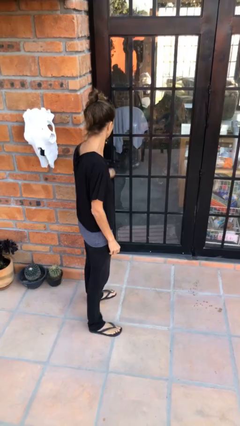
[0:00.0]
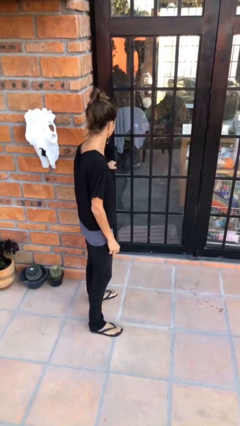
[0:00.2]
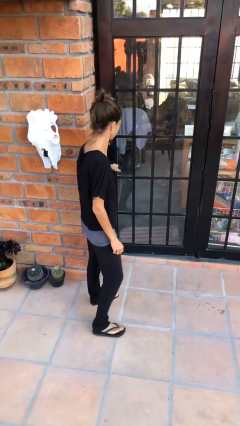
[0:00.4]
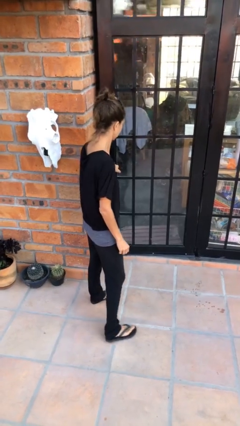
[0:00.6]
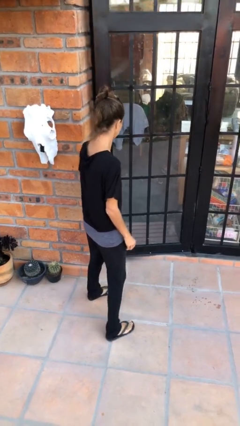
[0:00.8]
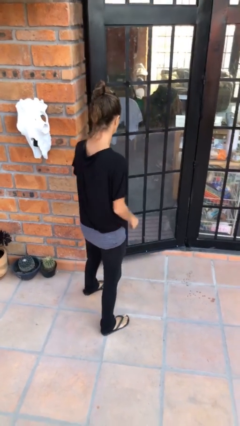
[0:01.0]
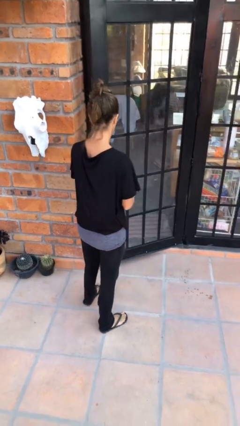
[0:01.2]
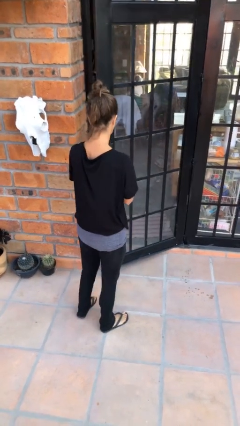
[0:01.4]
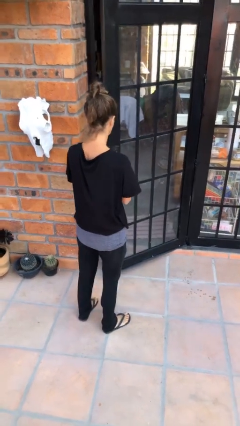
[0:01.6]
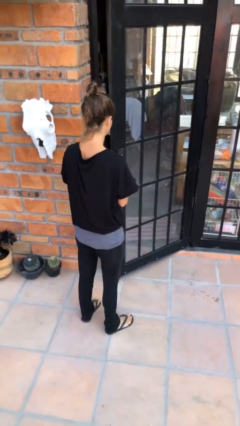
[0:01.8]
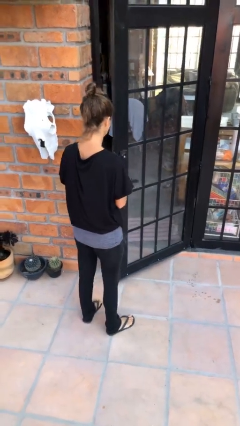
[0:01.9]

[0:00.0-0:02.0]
person opens facility door

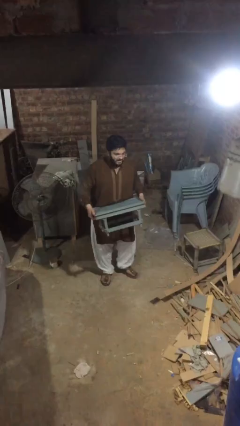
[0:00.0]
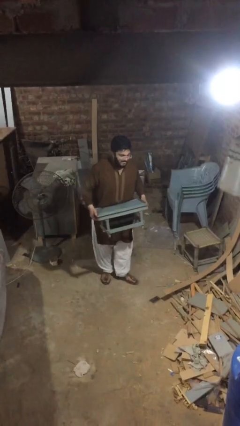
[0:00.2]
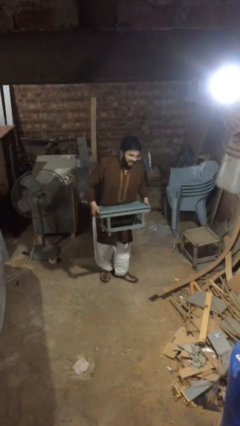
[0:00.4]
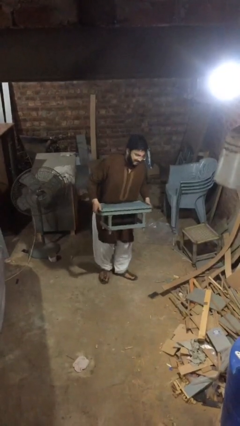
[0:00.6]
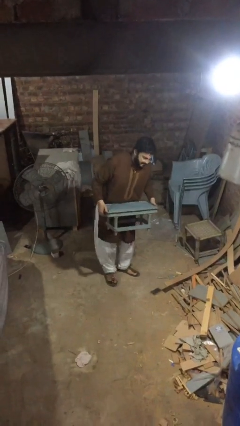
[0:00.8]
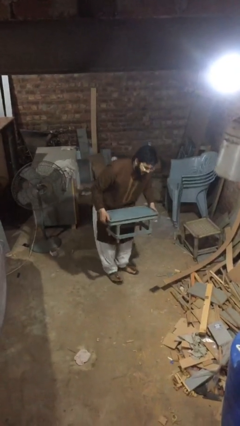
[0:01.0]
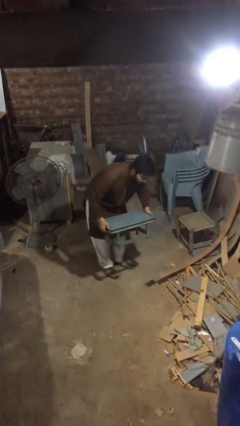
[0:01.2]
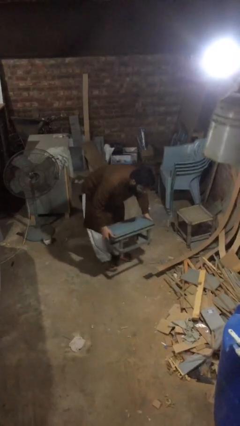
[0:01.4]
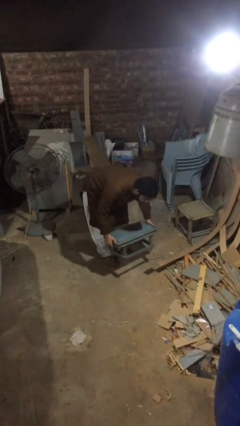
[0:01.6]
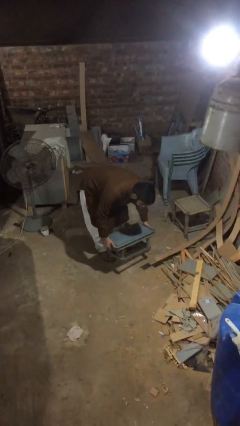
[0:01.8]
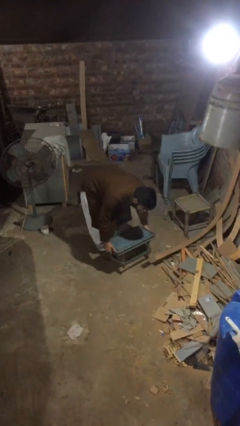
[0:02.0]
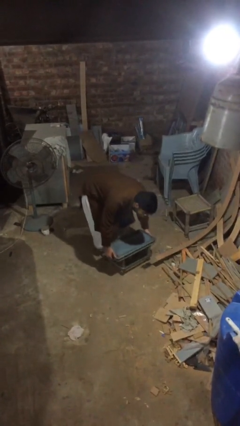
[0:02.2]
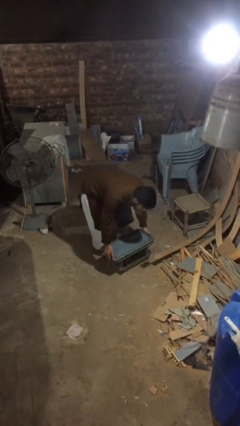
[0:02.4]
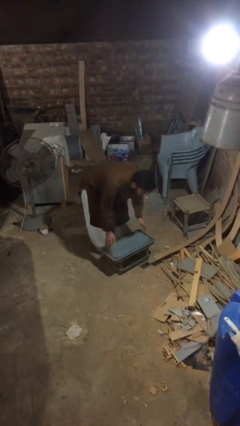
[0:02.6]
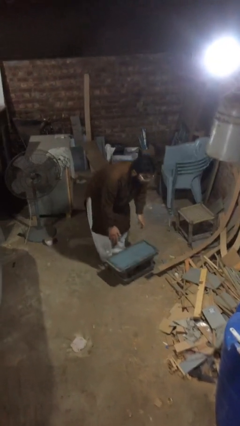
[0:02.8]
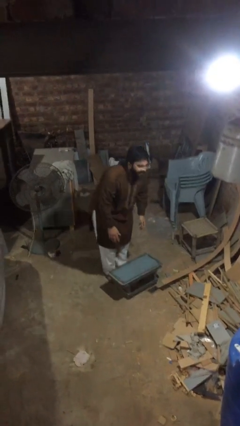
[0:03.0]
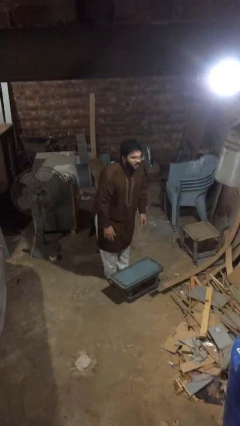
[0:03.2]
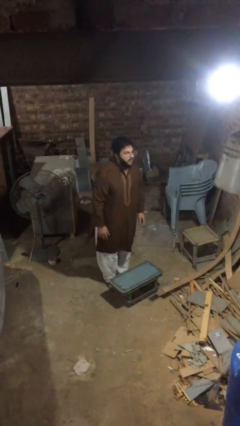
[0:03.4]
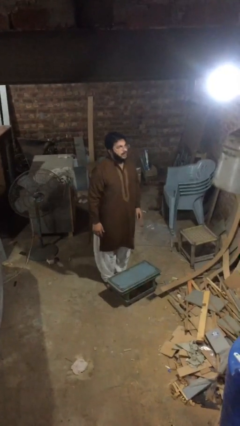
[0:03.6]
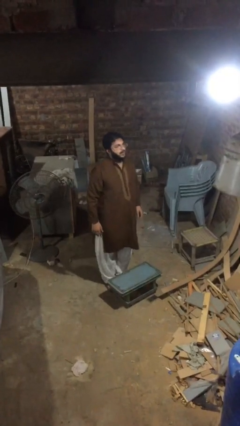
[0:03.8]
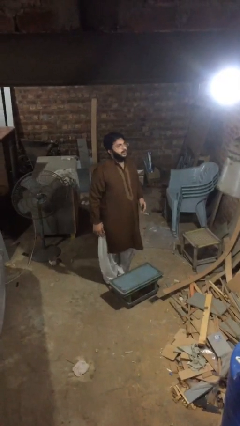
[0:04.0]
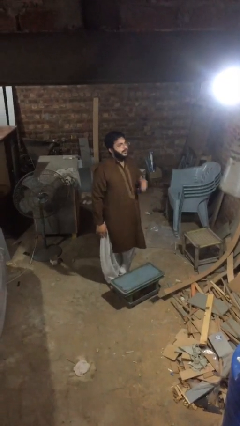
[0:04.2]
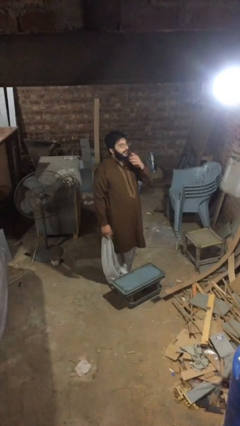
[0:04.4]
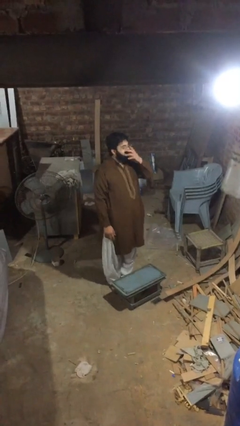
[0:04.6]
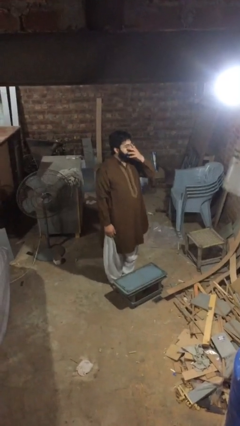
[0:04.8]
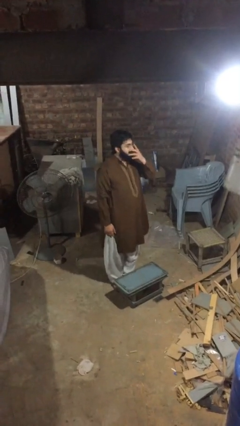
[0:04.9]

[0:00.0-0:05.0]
person puts down object on floor

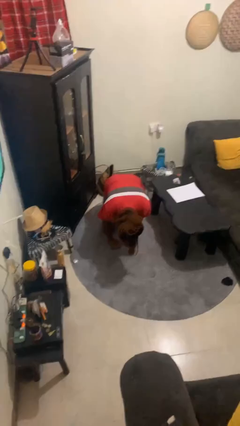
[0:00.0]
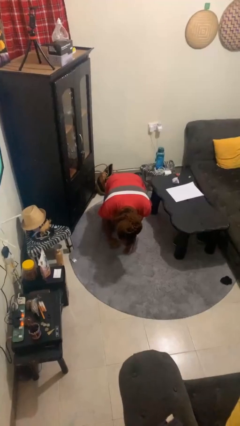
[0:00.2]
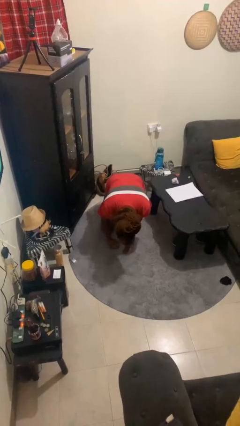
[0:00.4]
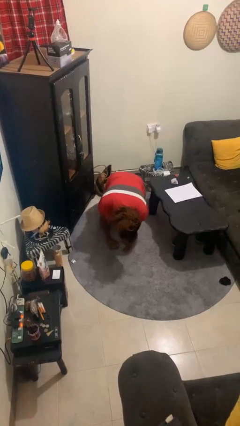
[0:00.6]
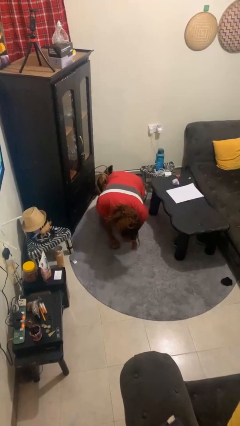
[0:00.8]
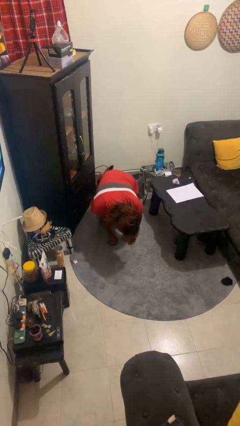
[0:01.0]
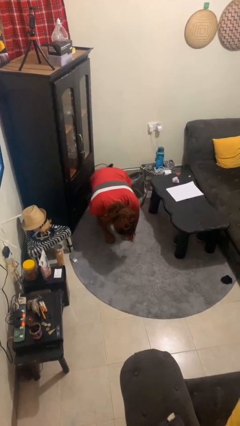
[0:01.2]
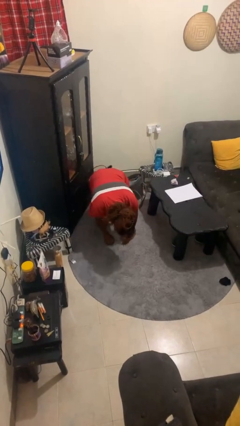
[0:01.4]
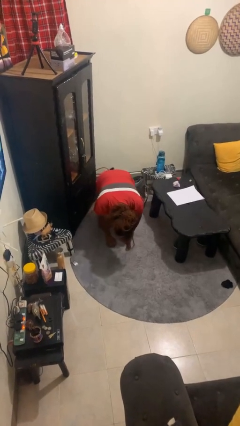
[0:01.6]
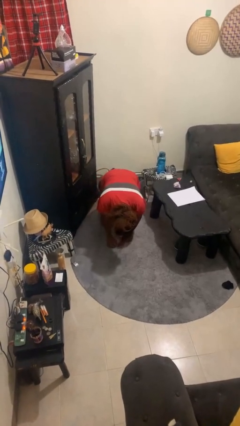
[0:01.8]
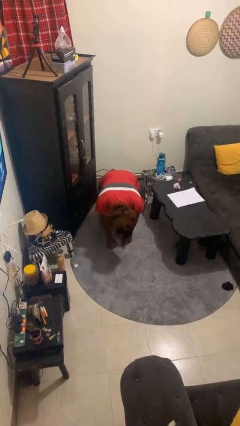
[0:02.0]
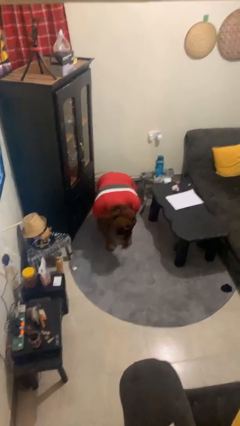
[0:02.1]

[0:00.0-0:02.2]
person crawls

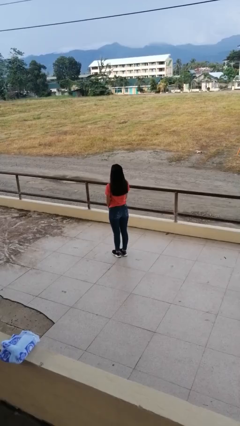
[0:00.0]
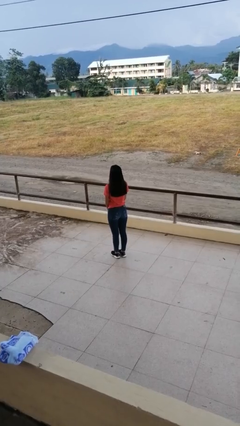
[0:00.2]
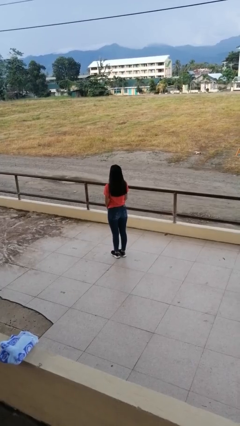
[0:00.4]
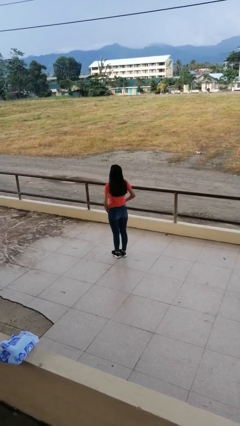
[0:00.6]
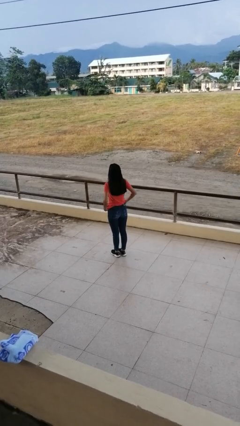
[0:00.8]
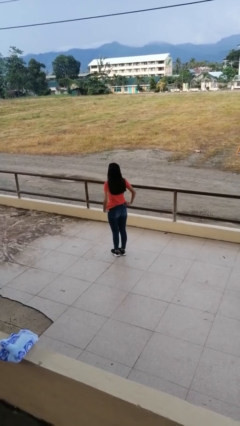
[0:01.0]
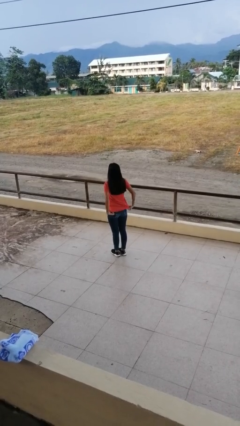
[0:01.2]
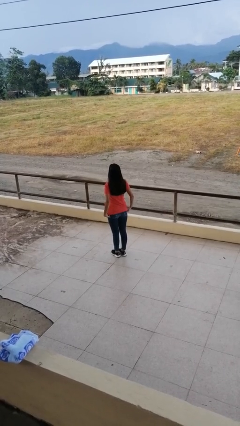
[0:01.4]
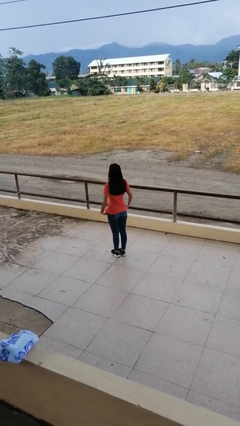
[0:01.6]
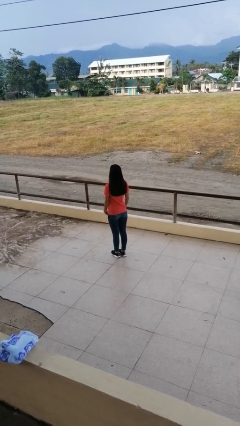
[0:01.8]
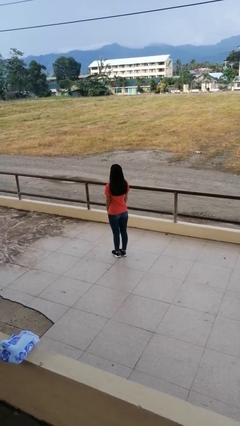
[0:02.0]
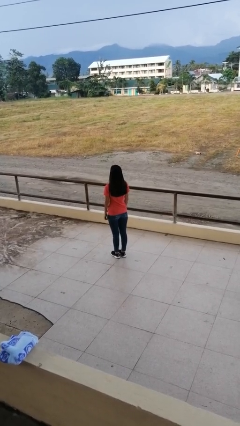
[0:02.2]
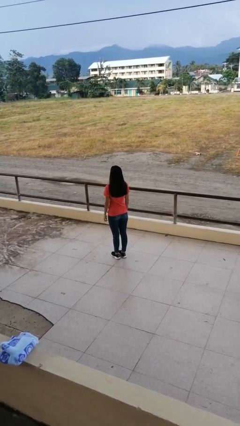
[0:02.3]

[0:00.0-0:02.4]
person untucks shirt

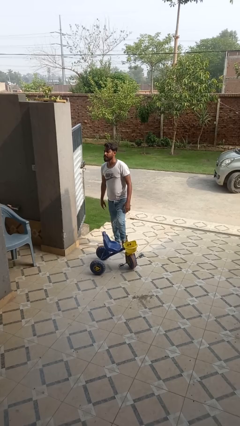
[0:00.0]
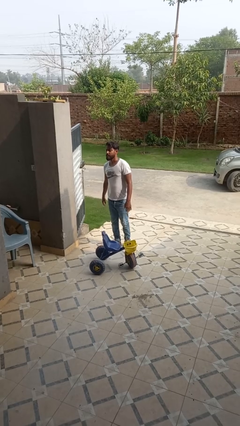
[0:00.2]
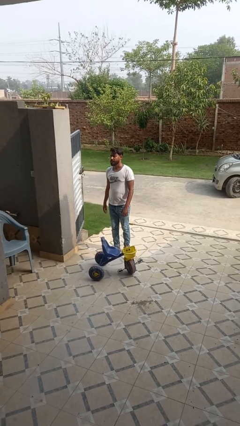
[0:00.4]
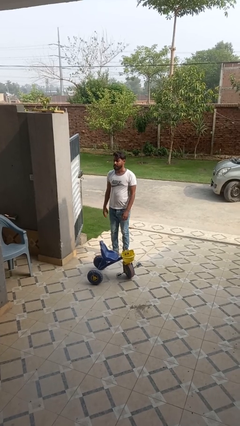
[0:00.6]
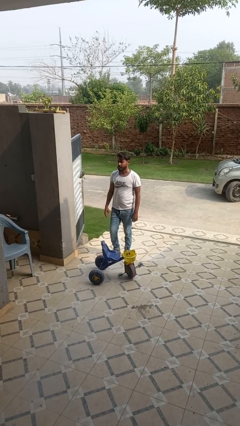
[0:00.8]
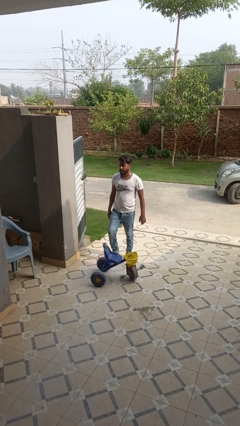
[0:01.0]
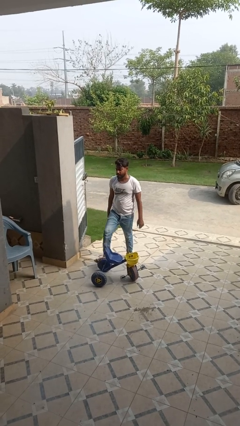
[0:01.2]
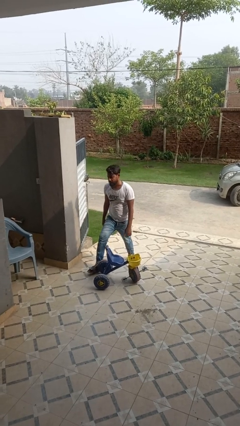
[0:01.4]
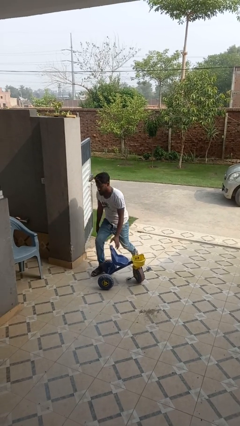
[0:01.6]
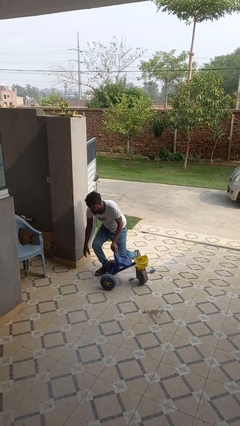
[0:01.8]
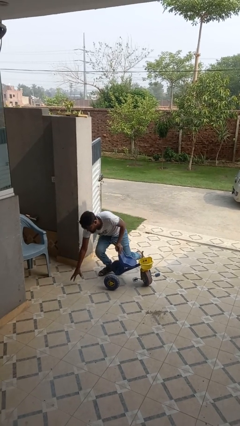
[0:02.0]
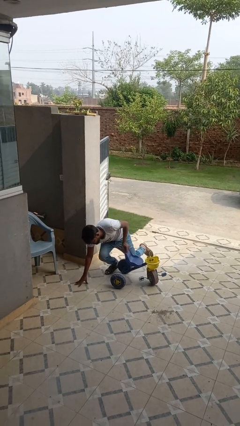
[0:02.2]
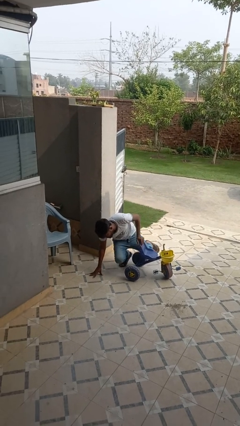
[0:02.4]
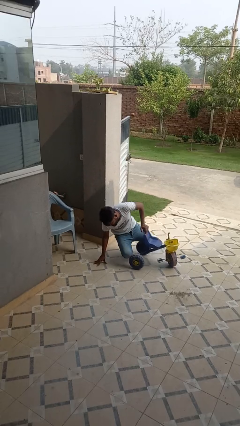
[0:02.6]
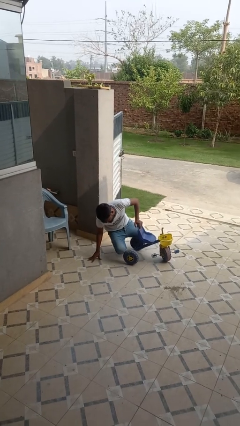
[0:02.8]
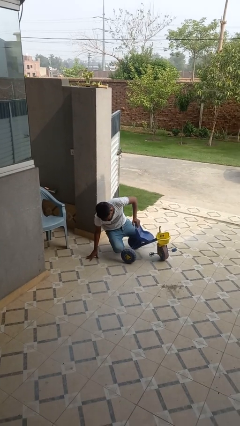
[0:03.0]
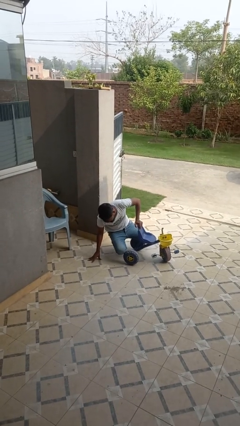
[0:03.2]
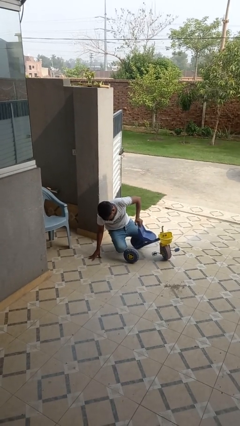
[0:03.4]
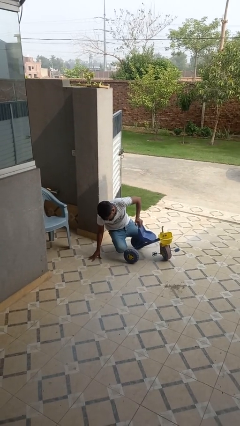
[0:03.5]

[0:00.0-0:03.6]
person trips on object on floor

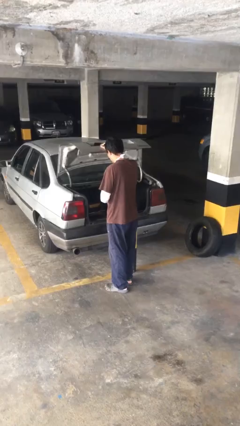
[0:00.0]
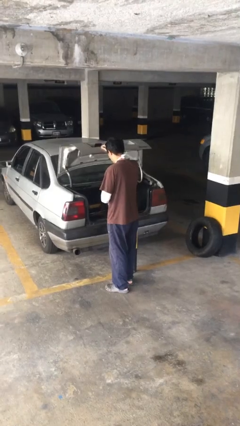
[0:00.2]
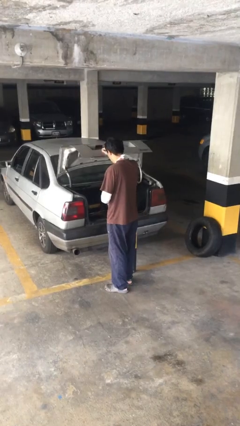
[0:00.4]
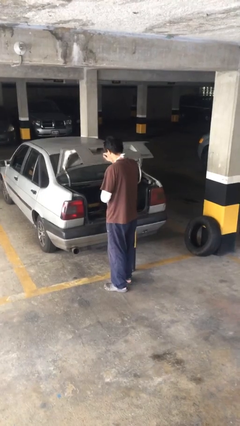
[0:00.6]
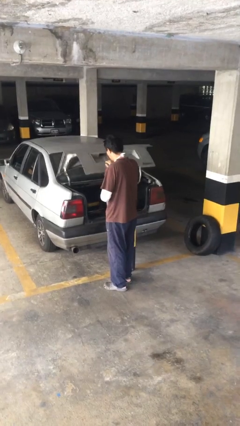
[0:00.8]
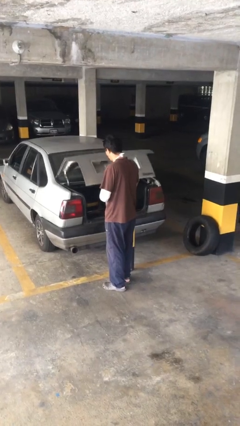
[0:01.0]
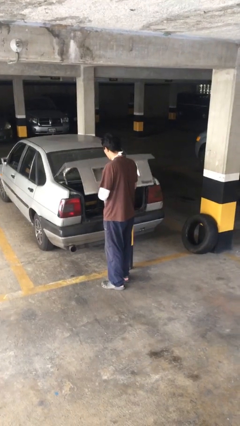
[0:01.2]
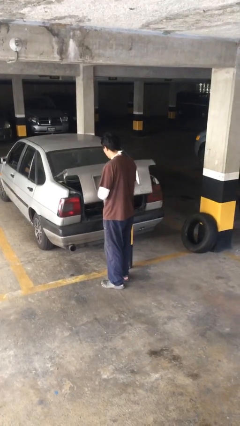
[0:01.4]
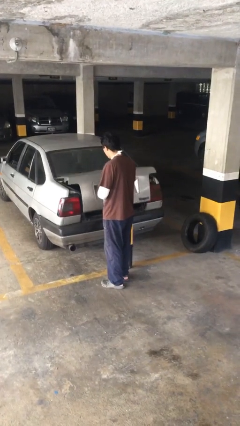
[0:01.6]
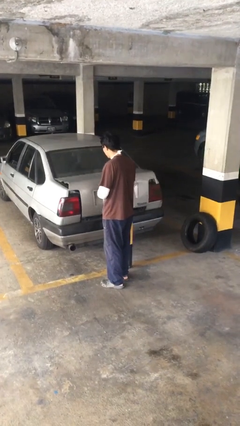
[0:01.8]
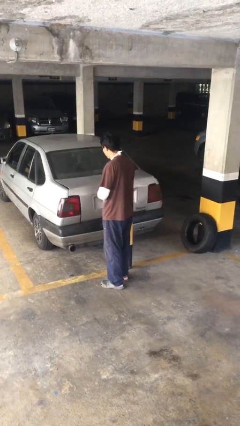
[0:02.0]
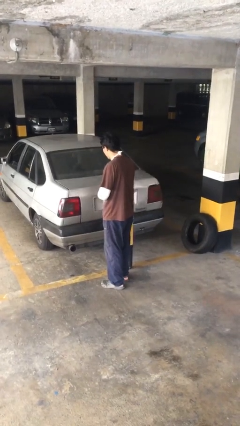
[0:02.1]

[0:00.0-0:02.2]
person closes car trunk
